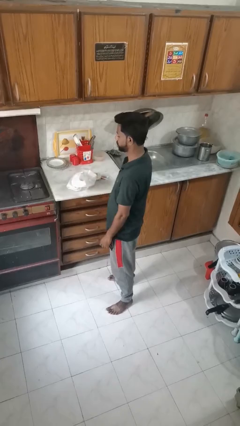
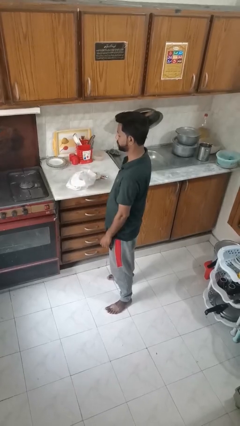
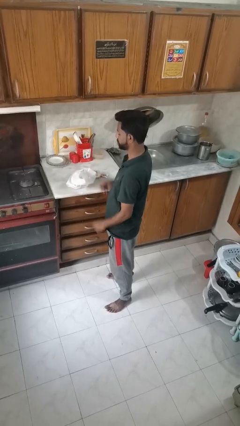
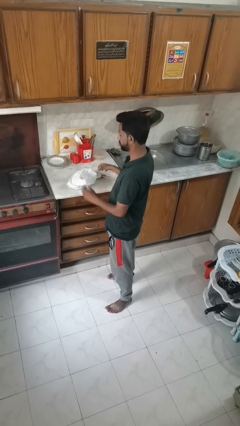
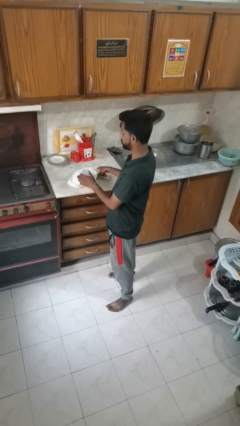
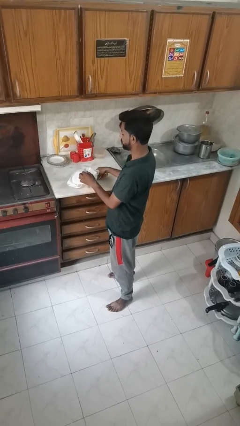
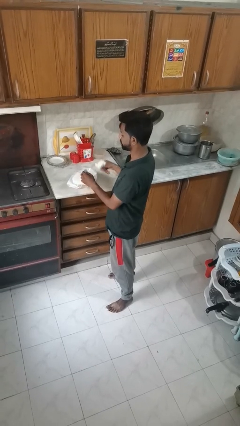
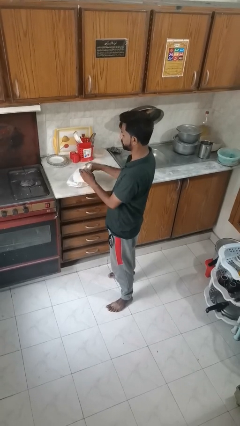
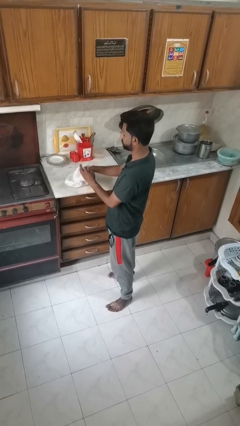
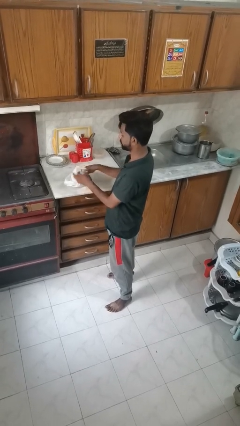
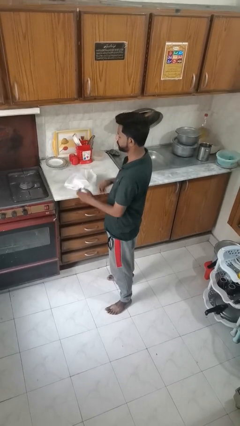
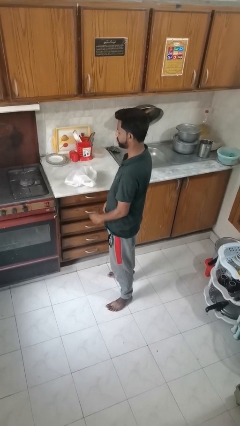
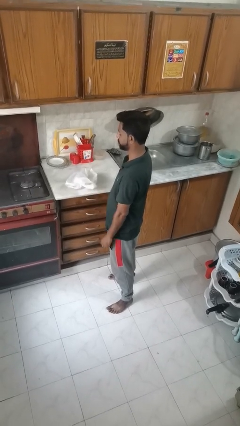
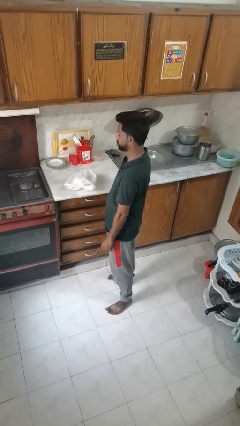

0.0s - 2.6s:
person puts object into bag

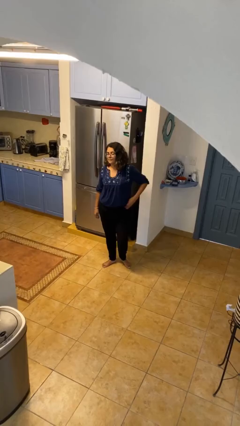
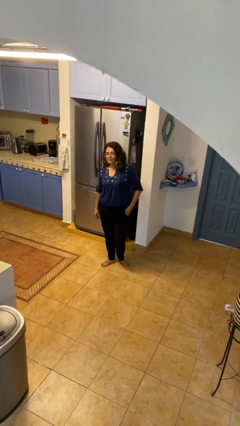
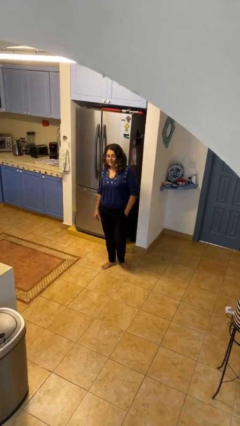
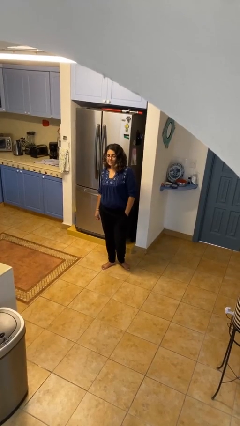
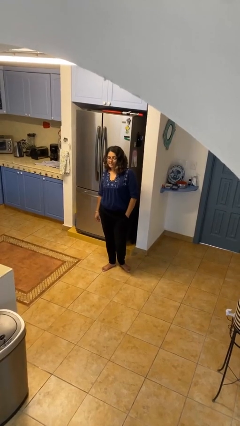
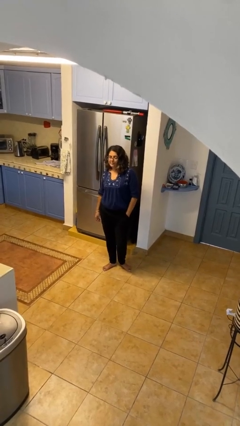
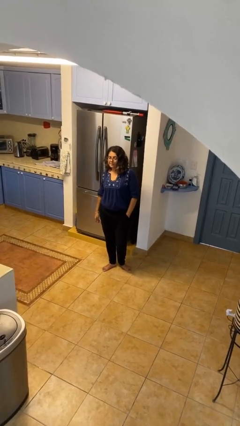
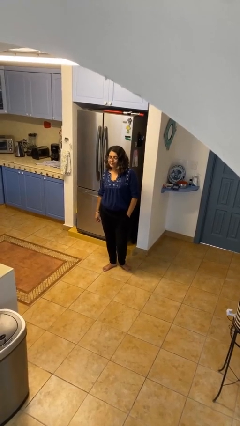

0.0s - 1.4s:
person puts hands in back pockets

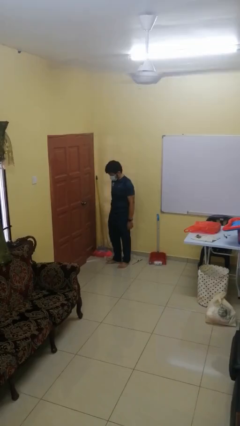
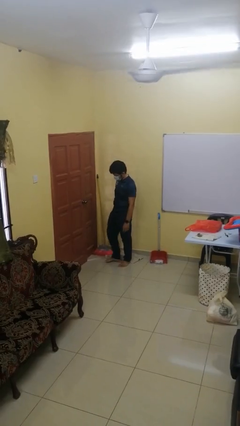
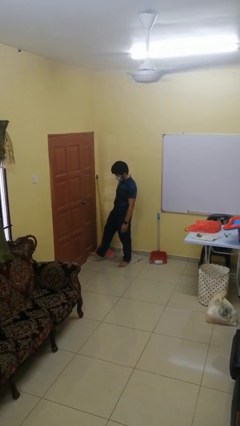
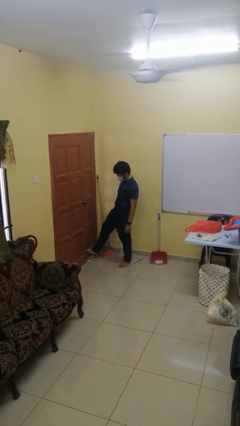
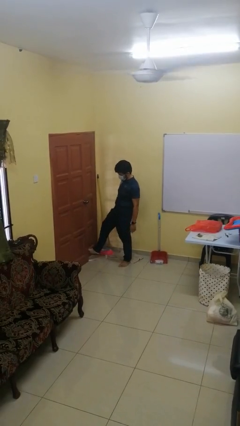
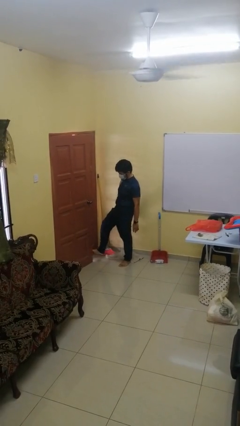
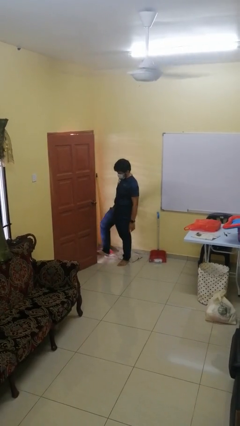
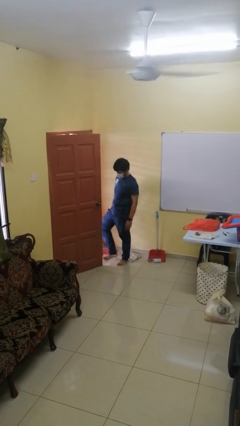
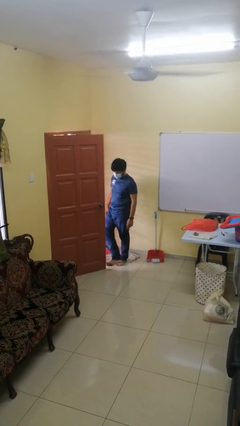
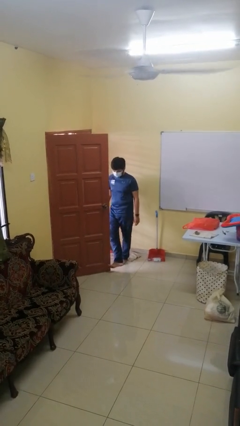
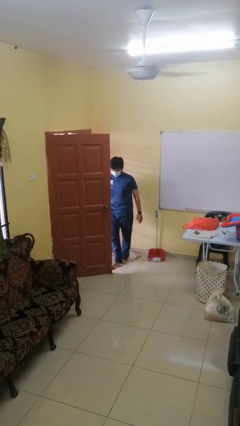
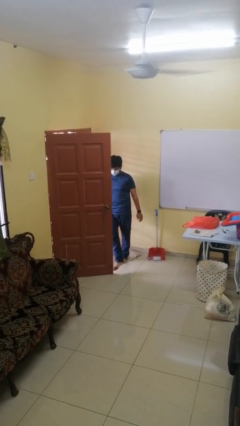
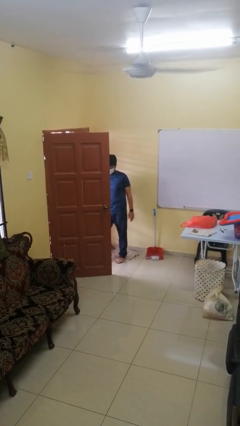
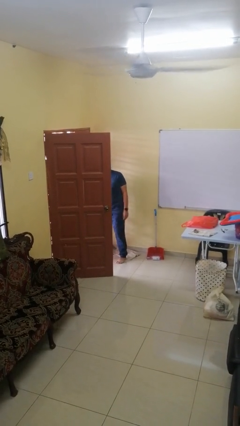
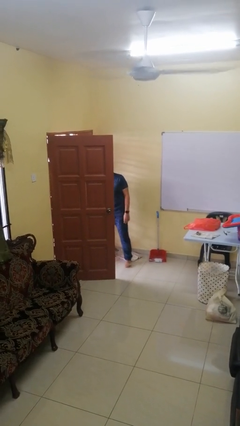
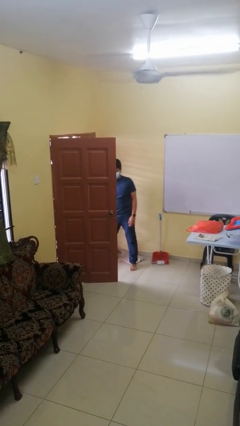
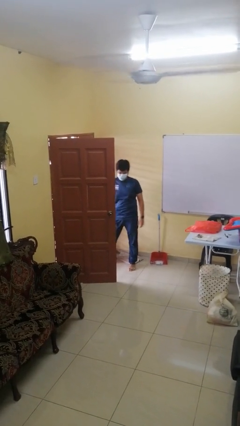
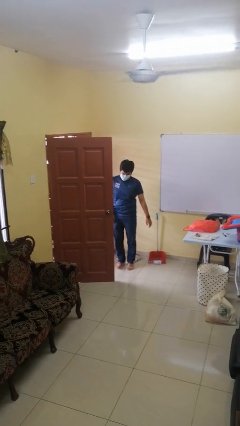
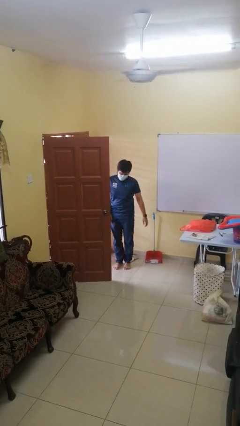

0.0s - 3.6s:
person opens facility door

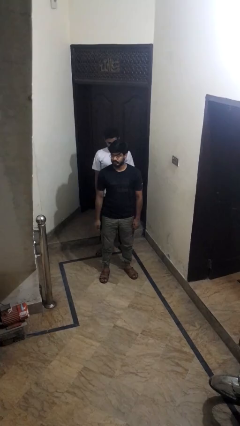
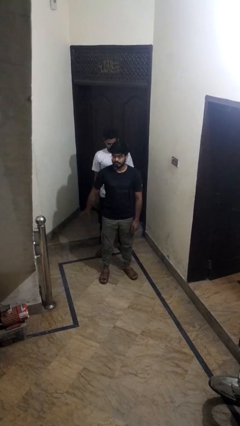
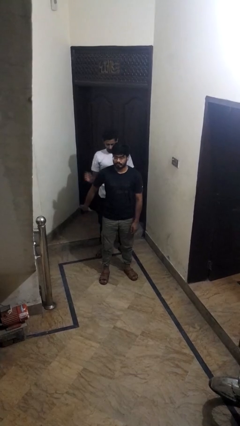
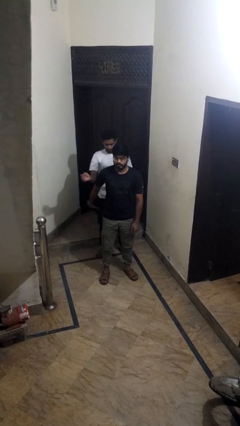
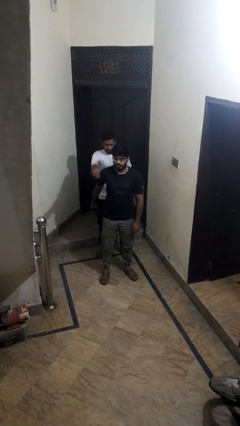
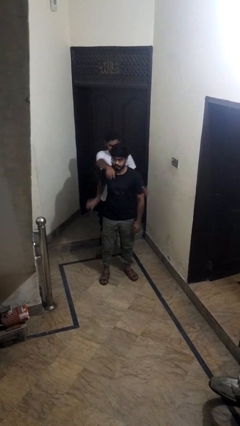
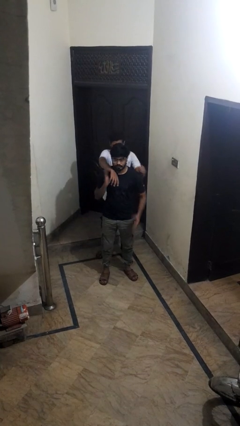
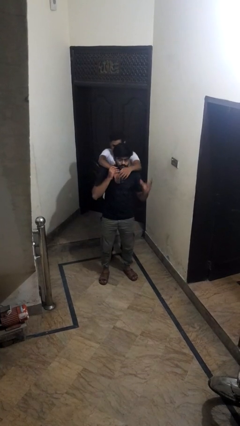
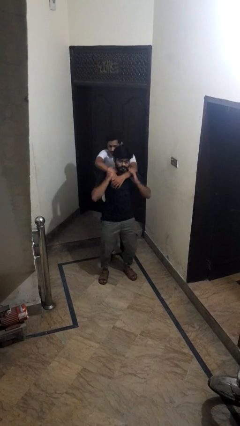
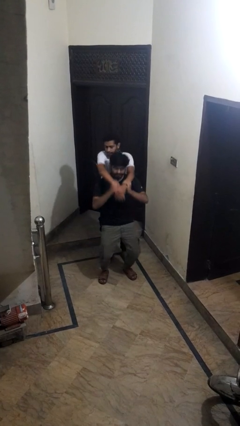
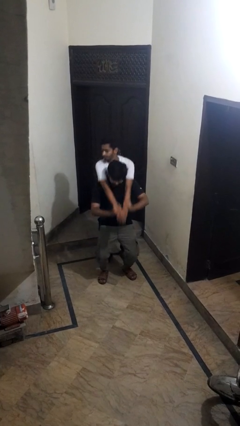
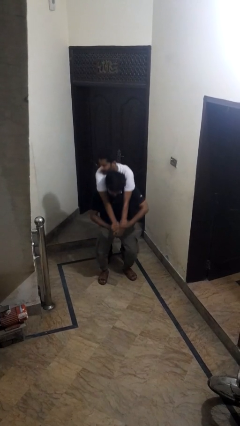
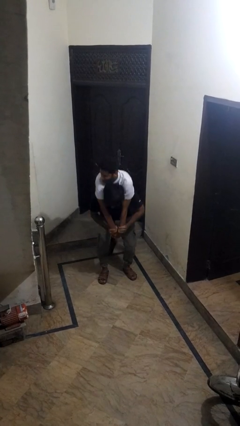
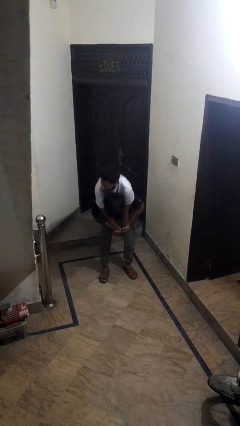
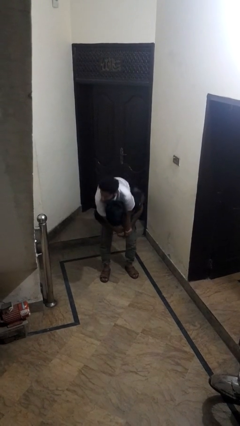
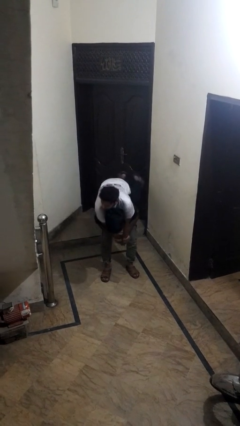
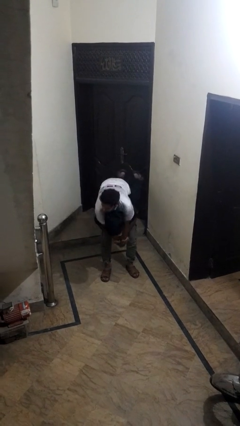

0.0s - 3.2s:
person carries person over shoulder

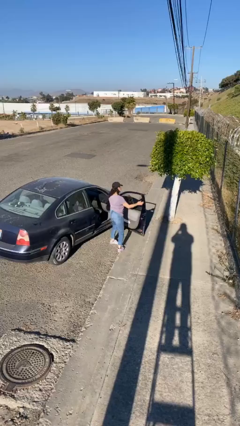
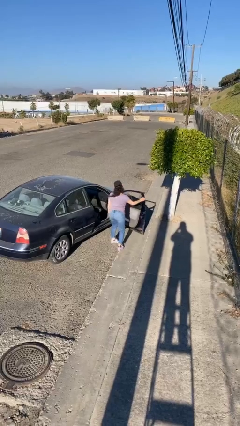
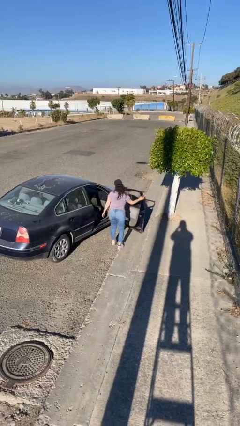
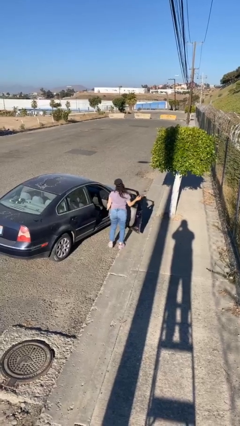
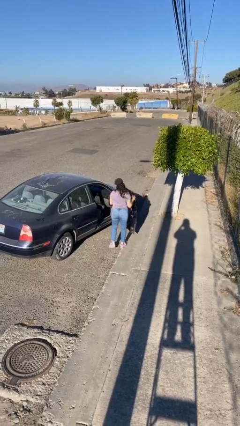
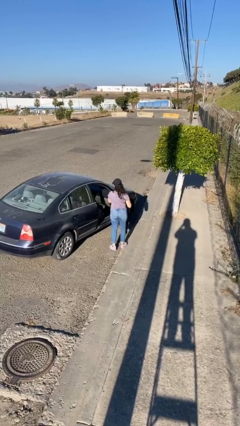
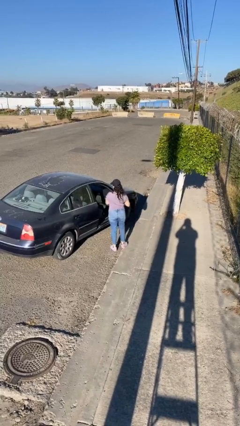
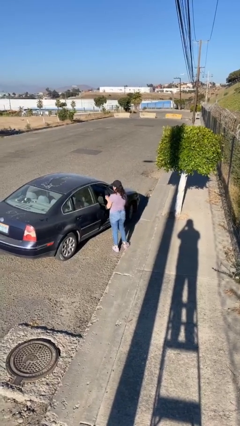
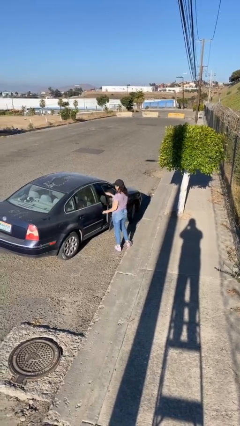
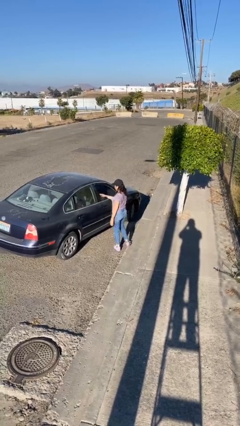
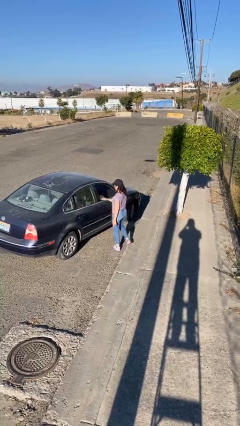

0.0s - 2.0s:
person closes car door

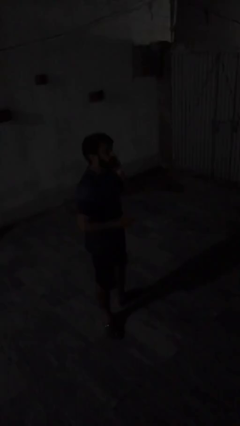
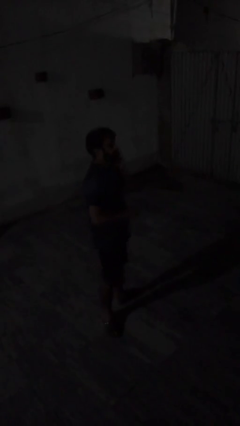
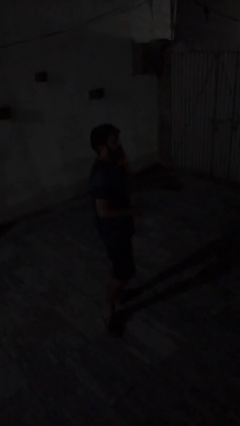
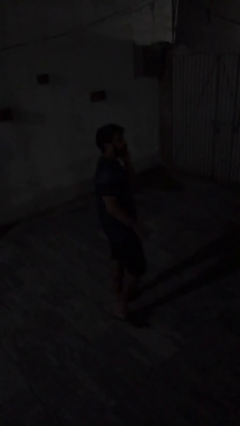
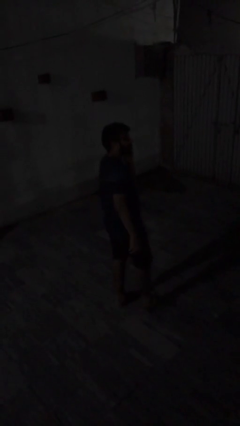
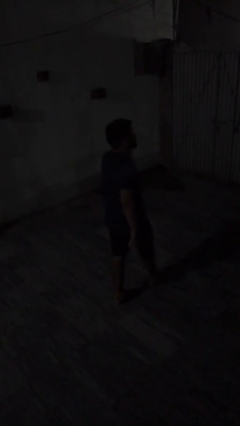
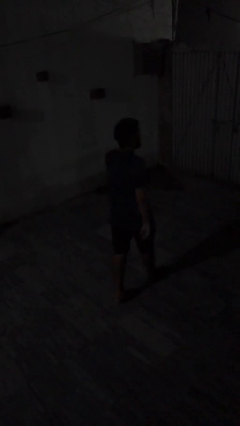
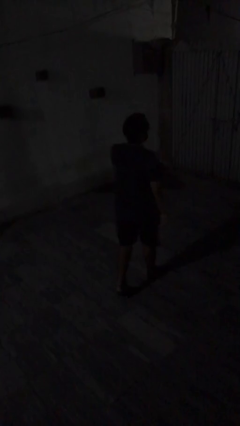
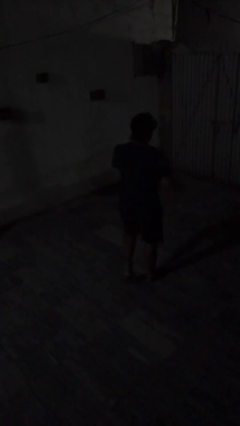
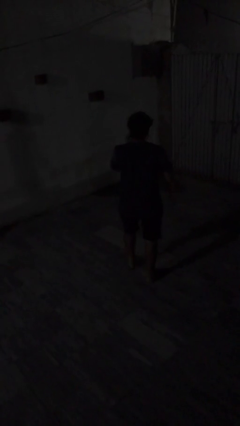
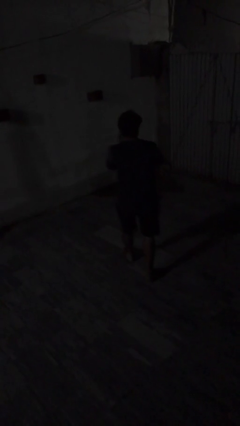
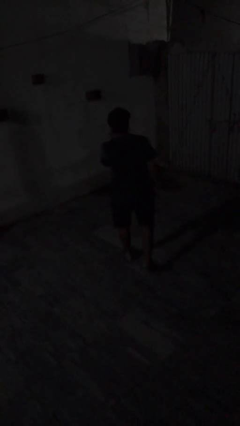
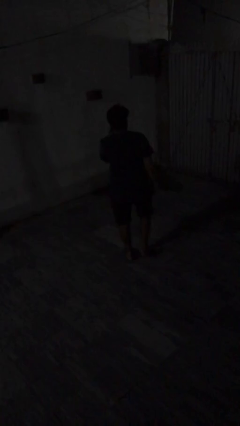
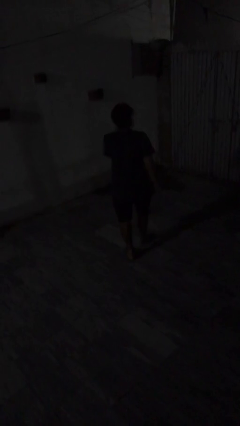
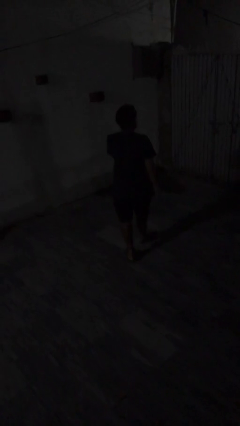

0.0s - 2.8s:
person talks on phone

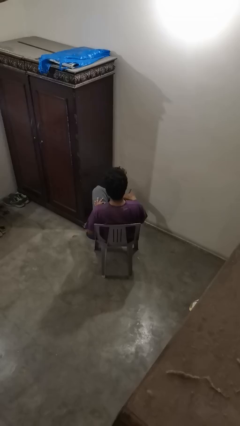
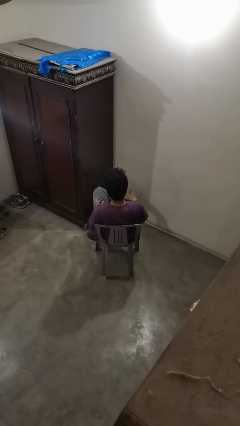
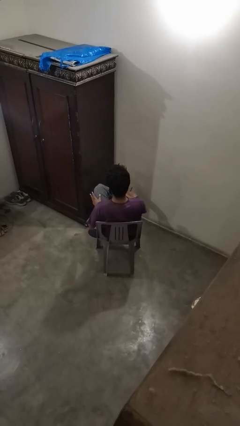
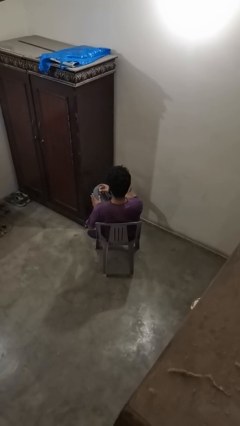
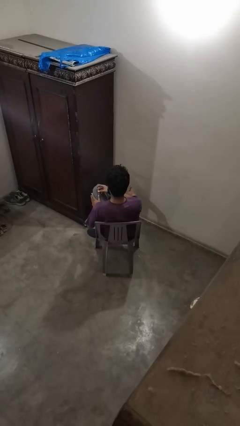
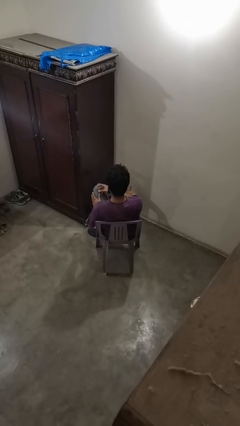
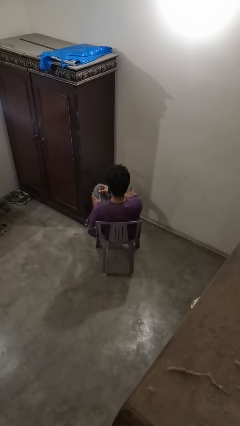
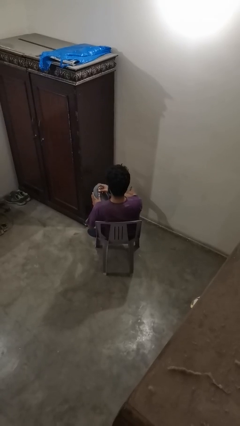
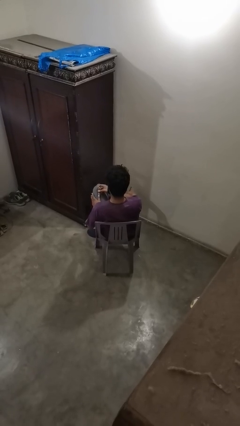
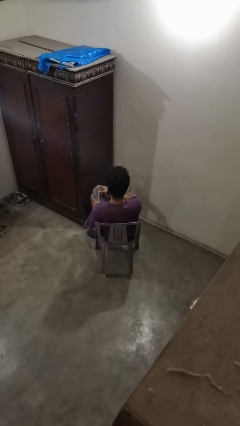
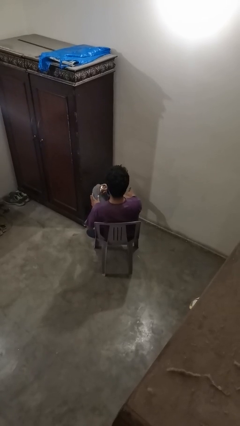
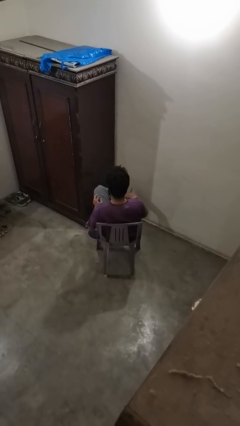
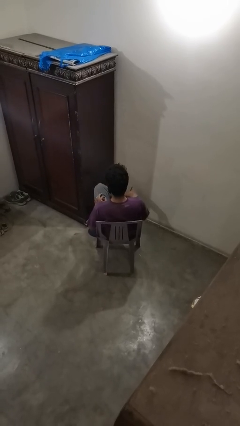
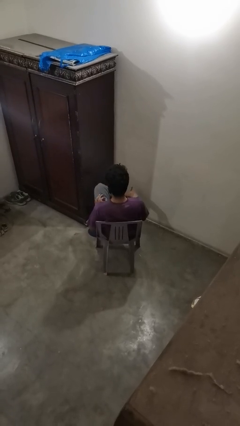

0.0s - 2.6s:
person clips fingernails
